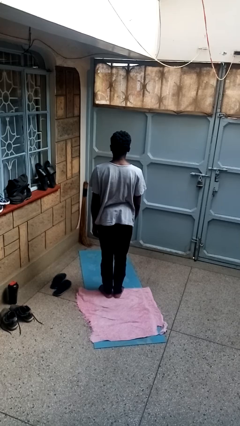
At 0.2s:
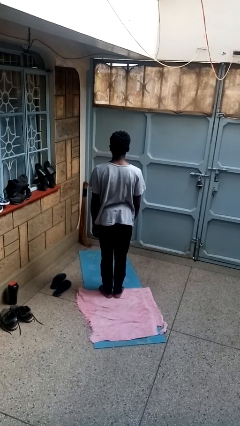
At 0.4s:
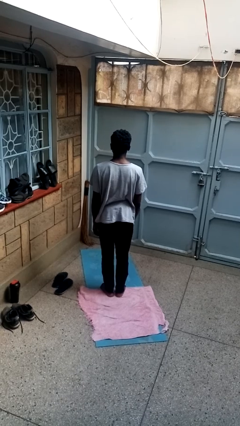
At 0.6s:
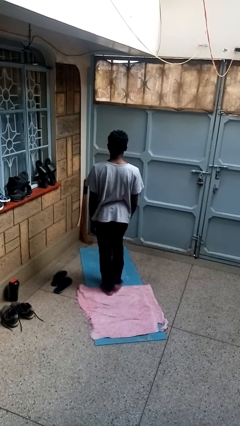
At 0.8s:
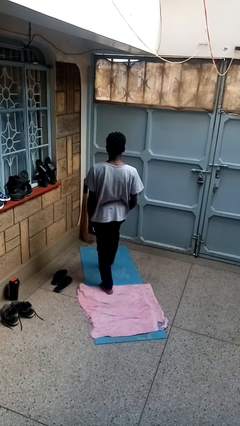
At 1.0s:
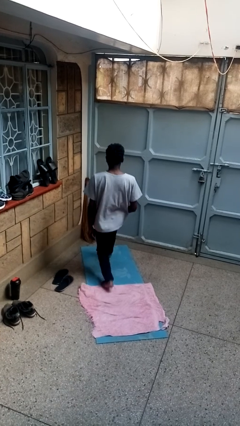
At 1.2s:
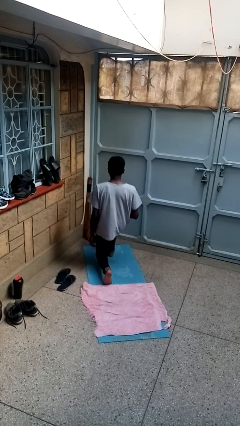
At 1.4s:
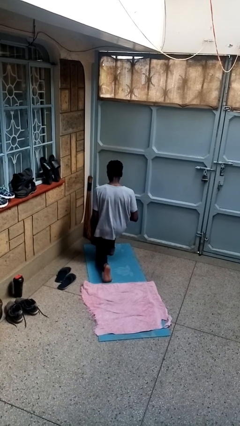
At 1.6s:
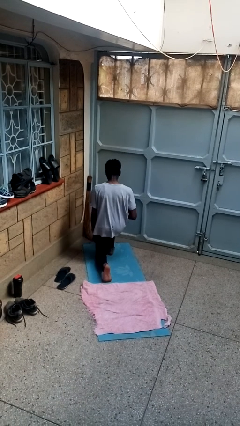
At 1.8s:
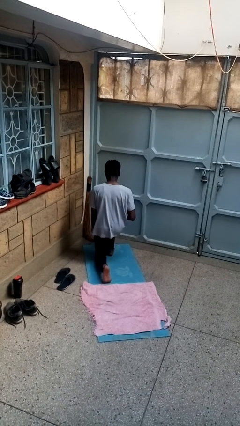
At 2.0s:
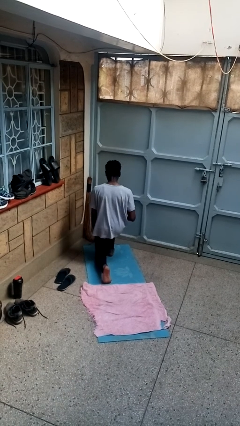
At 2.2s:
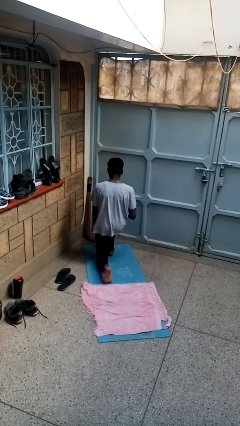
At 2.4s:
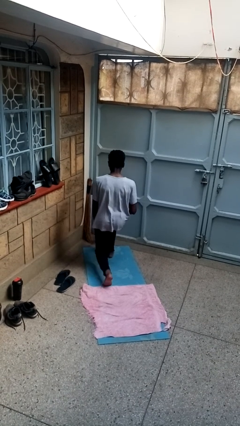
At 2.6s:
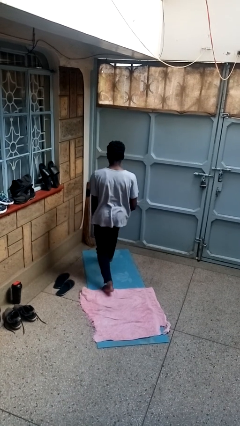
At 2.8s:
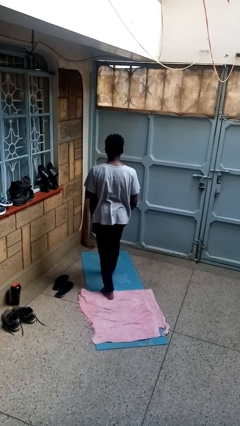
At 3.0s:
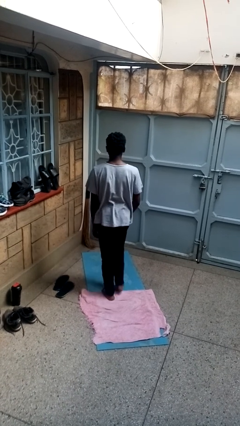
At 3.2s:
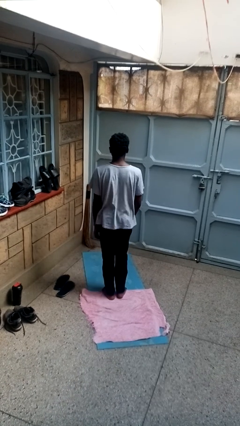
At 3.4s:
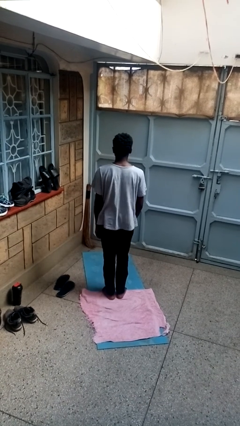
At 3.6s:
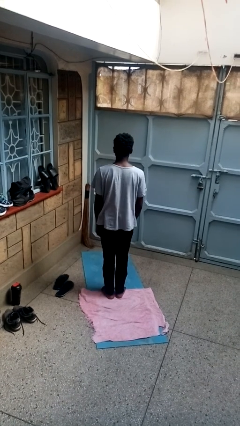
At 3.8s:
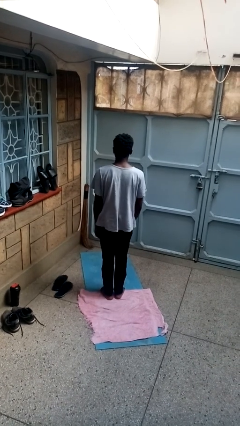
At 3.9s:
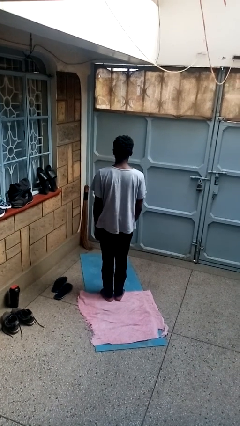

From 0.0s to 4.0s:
person exercises with lunges

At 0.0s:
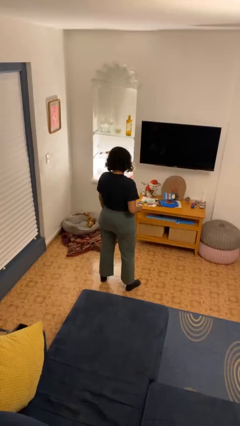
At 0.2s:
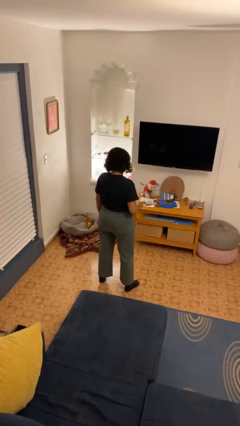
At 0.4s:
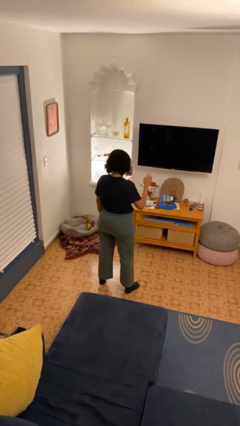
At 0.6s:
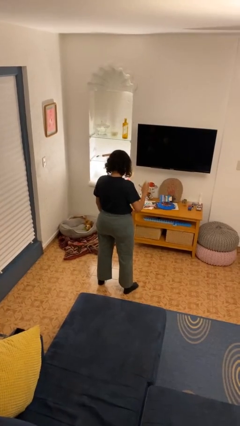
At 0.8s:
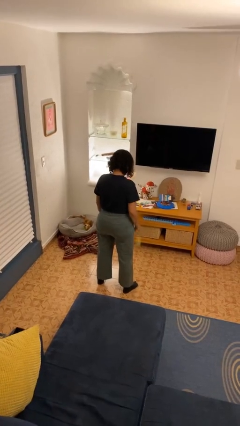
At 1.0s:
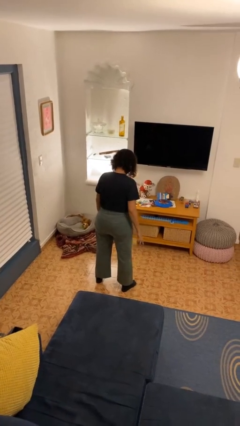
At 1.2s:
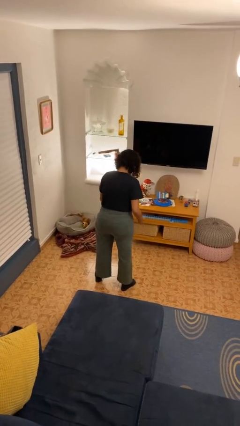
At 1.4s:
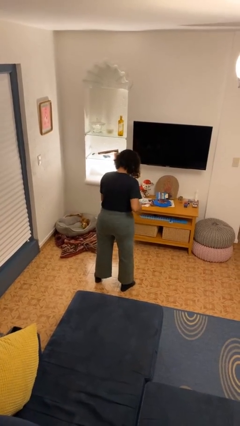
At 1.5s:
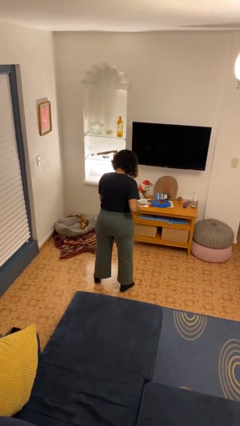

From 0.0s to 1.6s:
person bounces ball on floor

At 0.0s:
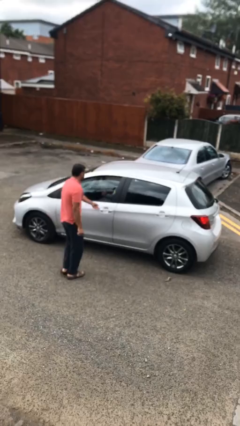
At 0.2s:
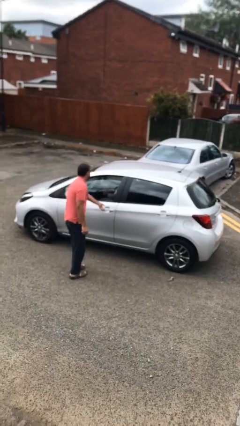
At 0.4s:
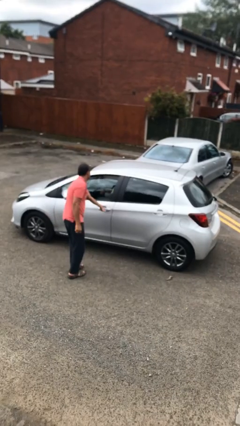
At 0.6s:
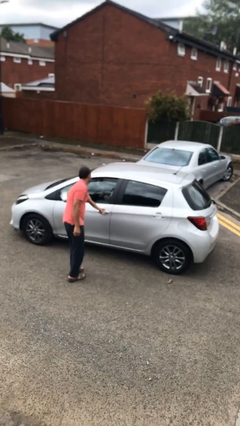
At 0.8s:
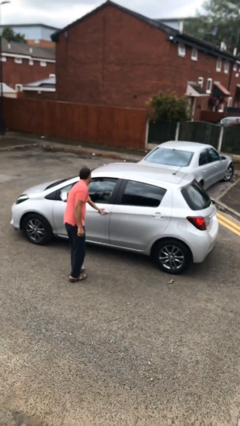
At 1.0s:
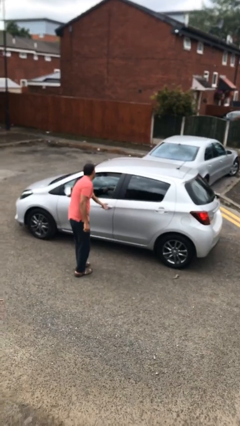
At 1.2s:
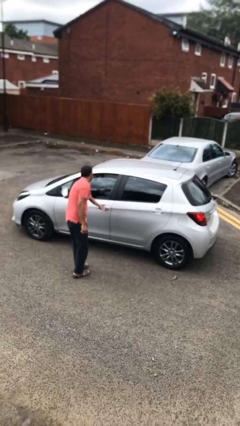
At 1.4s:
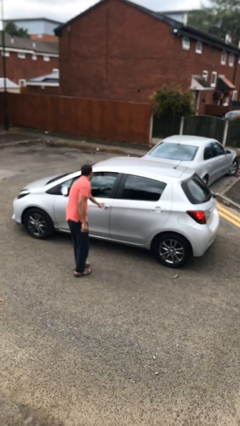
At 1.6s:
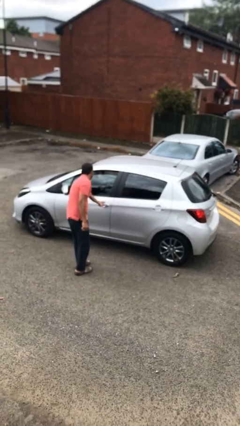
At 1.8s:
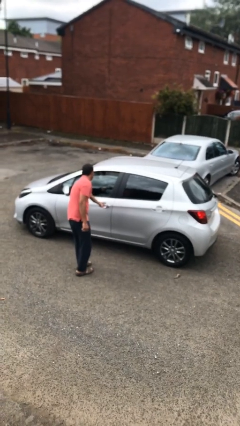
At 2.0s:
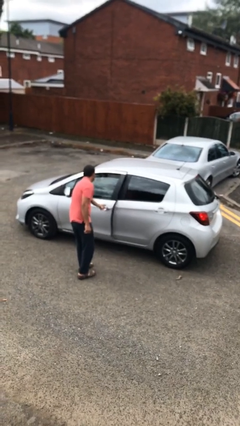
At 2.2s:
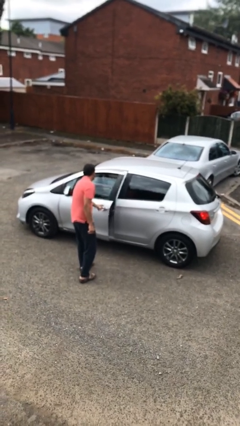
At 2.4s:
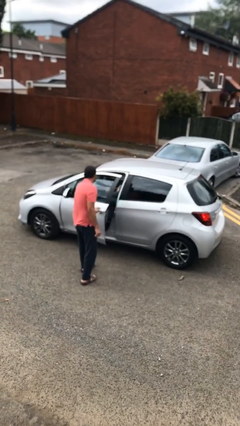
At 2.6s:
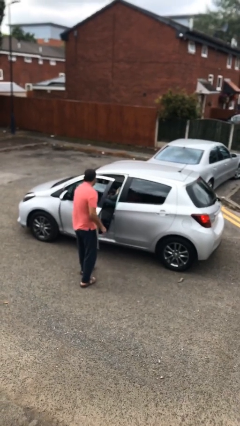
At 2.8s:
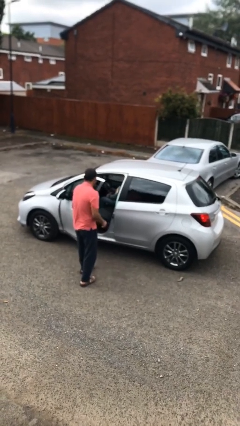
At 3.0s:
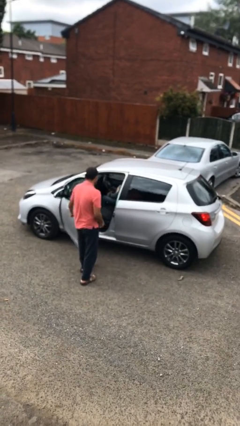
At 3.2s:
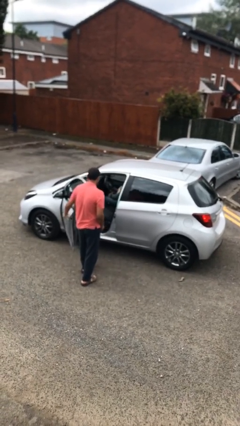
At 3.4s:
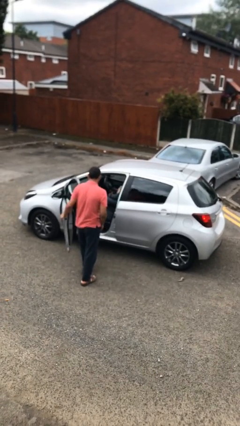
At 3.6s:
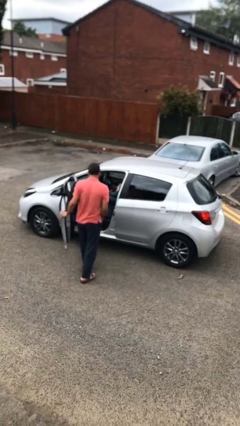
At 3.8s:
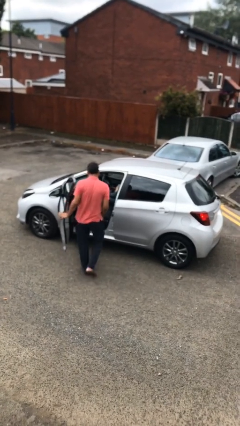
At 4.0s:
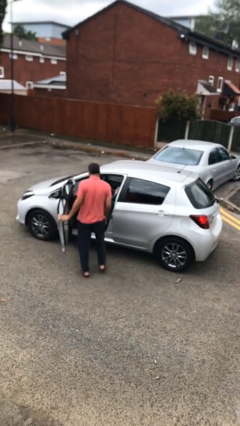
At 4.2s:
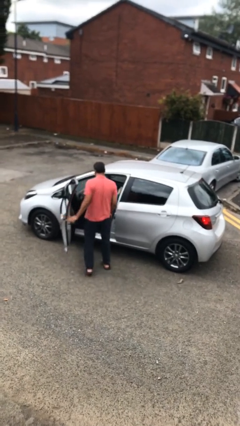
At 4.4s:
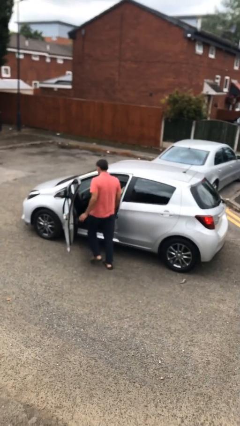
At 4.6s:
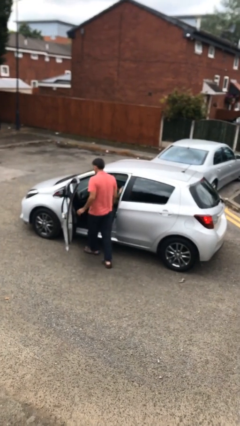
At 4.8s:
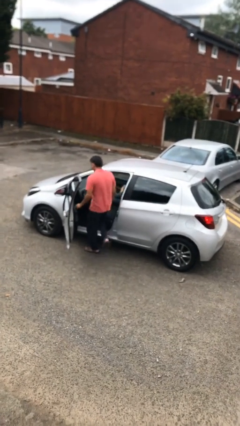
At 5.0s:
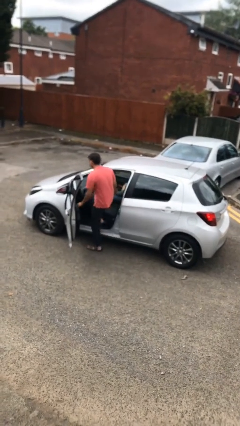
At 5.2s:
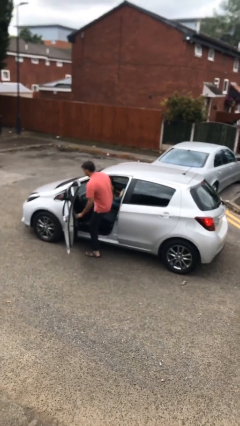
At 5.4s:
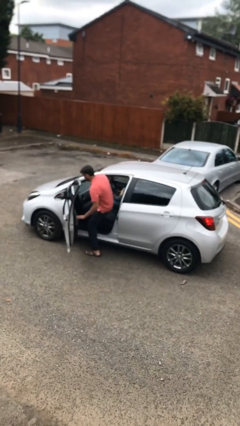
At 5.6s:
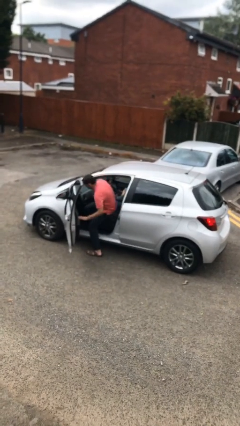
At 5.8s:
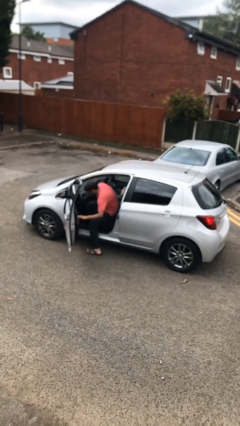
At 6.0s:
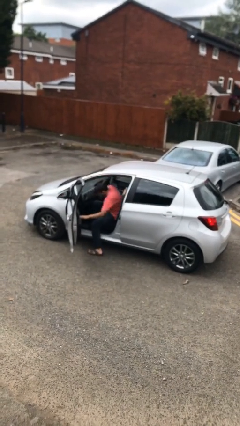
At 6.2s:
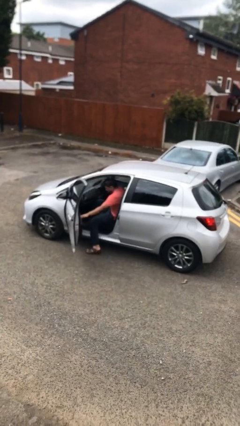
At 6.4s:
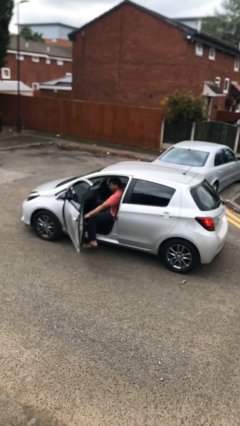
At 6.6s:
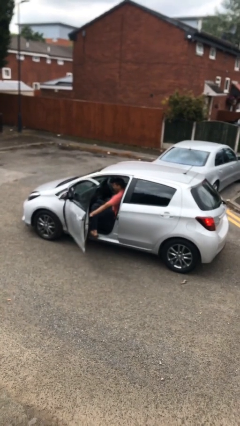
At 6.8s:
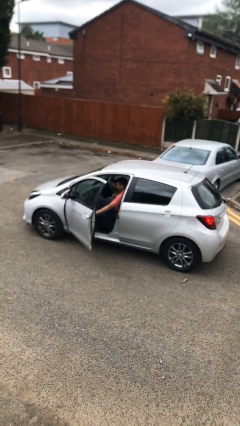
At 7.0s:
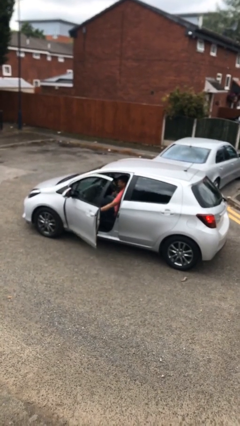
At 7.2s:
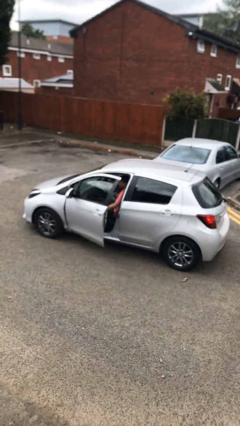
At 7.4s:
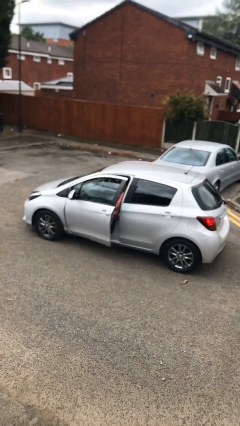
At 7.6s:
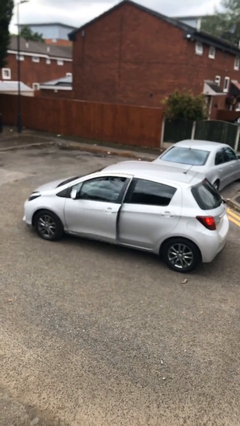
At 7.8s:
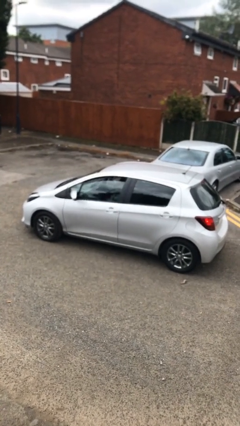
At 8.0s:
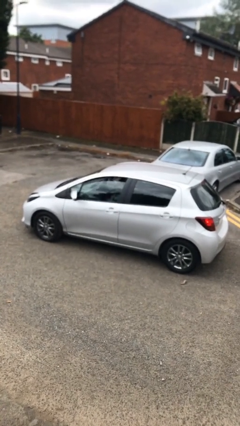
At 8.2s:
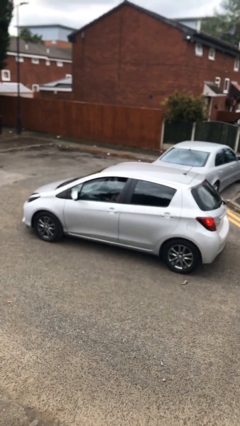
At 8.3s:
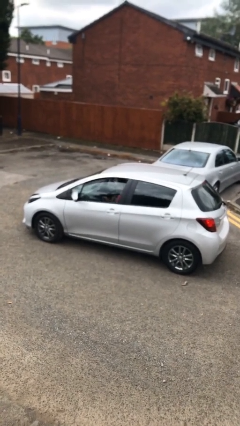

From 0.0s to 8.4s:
car picks up person

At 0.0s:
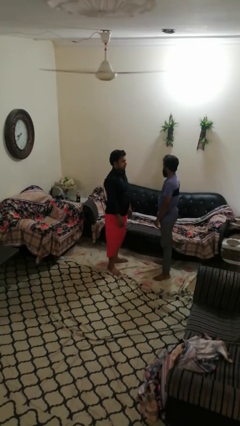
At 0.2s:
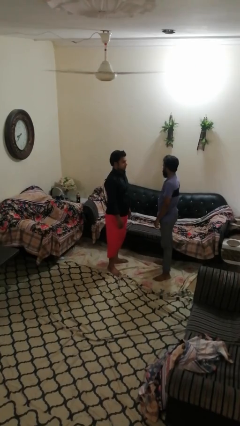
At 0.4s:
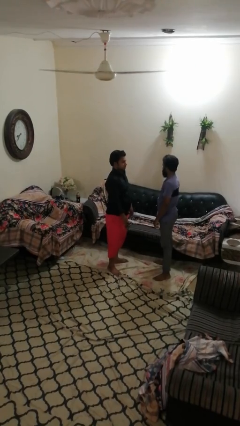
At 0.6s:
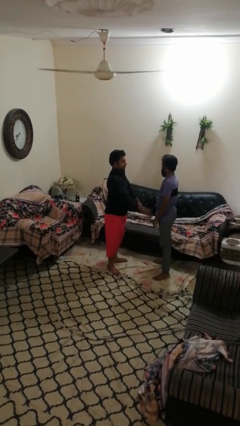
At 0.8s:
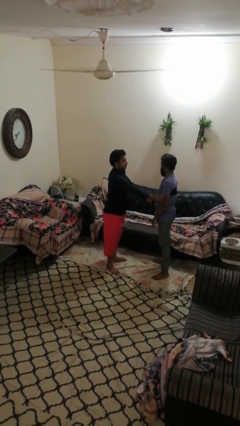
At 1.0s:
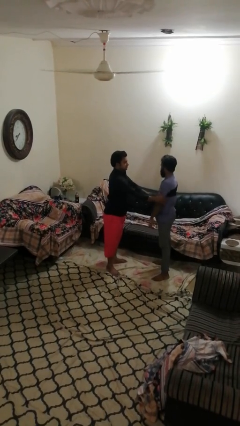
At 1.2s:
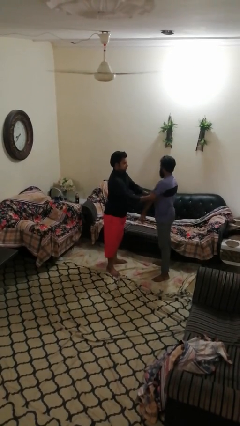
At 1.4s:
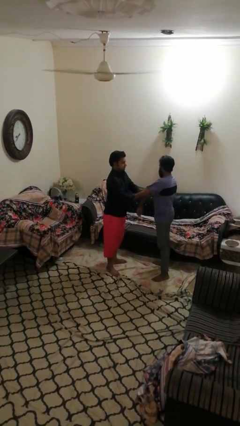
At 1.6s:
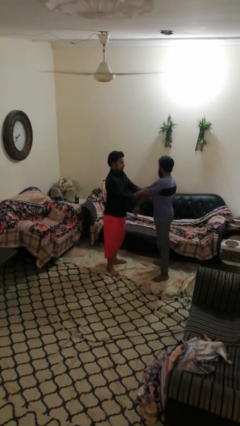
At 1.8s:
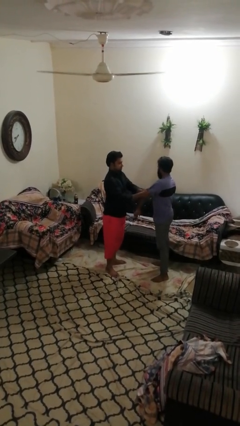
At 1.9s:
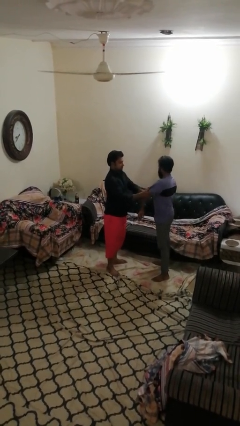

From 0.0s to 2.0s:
person grabs person by bicep

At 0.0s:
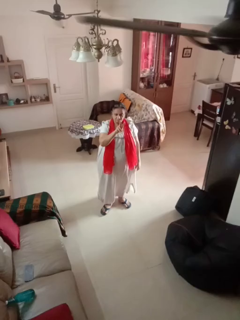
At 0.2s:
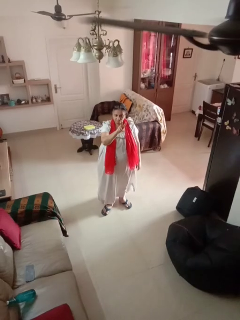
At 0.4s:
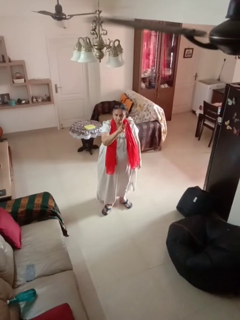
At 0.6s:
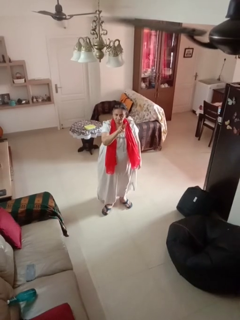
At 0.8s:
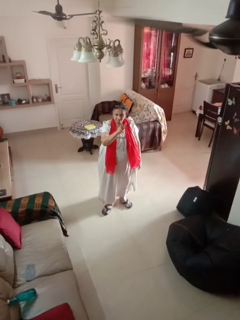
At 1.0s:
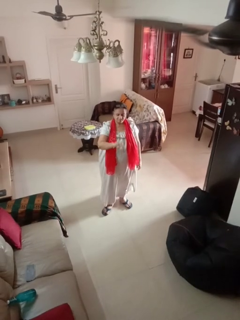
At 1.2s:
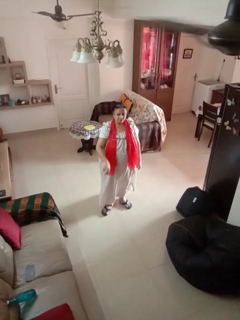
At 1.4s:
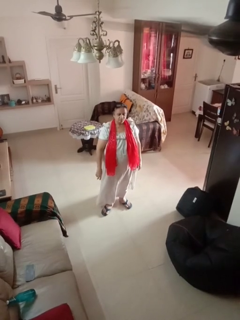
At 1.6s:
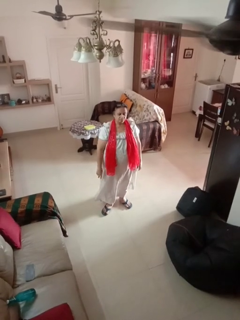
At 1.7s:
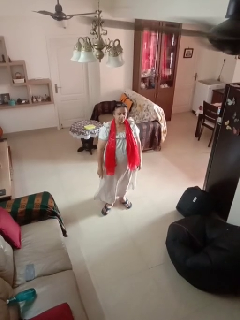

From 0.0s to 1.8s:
person gestures peace

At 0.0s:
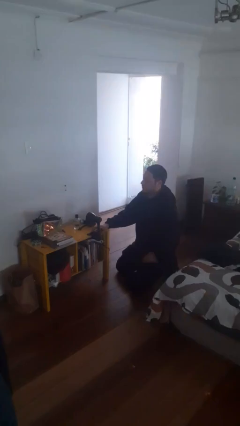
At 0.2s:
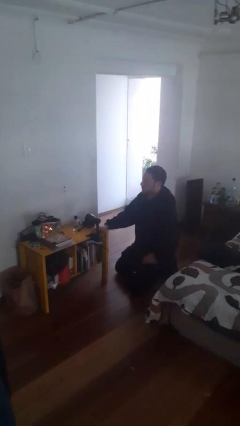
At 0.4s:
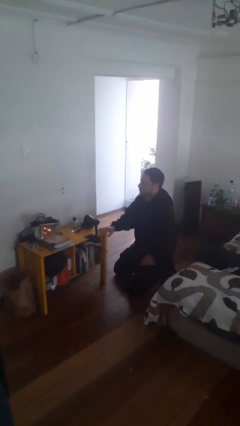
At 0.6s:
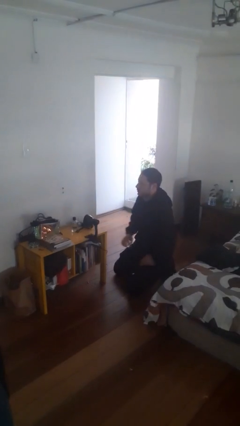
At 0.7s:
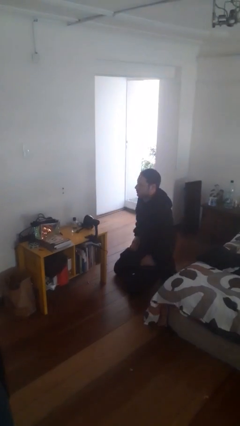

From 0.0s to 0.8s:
person turns off lamp
